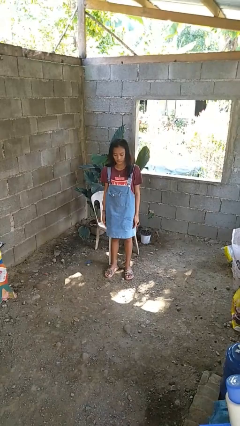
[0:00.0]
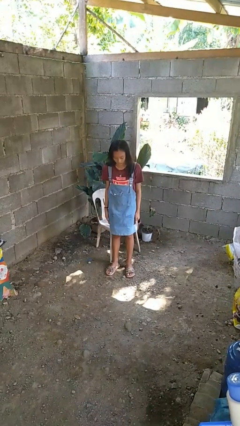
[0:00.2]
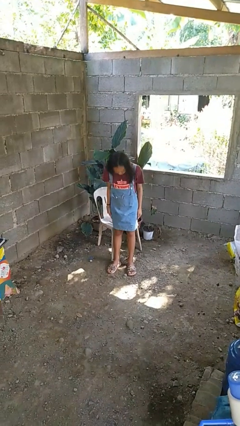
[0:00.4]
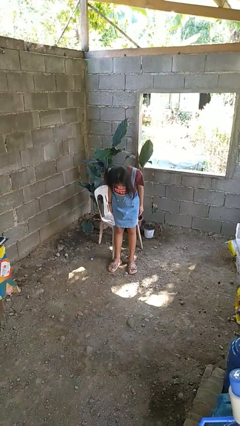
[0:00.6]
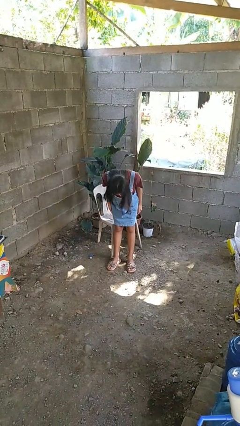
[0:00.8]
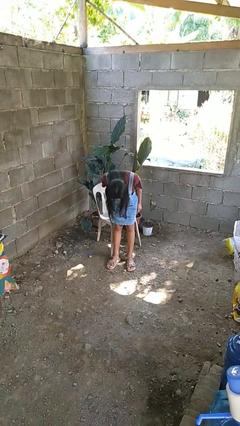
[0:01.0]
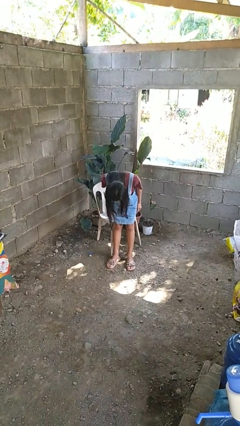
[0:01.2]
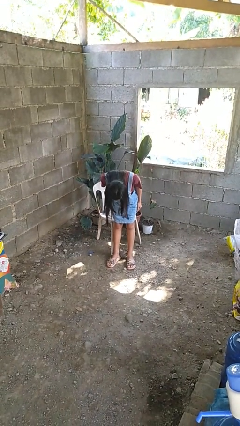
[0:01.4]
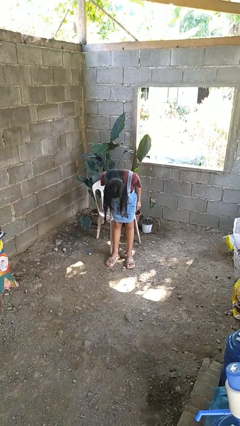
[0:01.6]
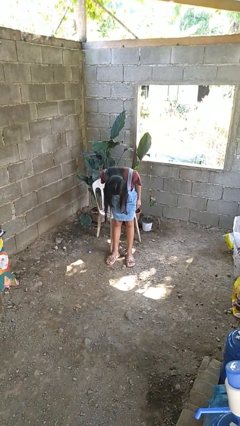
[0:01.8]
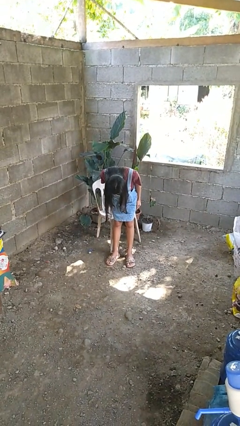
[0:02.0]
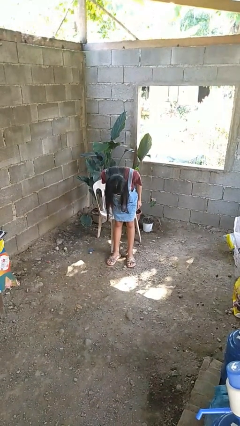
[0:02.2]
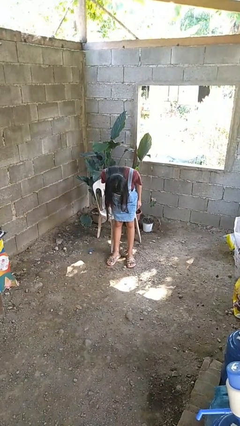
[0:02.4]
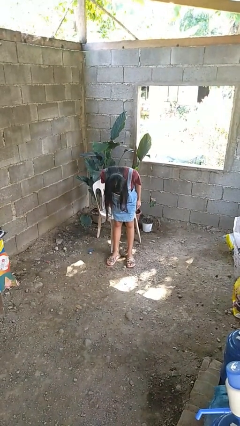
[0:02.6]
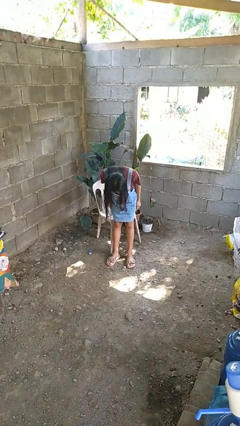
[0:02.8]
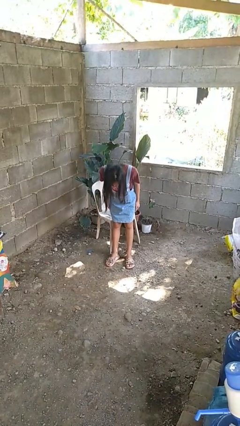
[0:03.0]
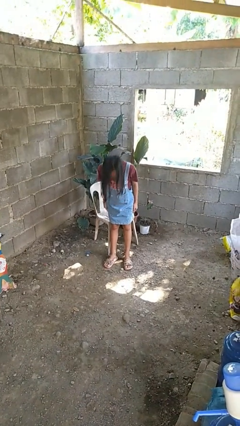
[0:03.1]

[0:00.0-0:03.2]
person bows

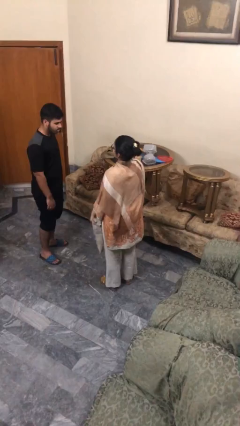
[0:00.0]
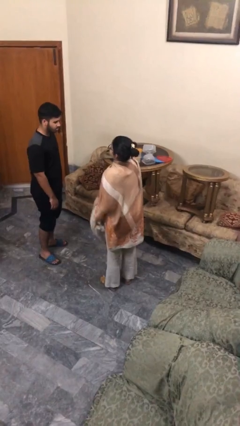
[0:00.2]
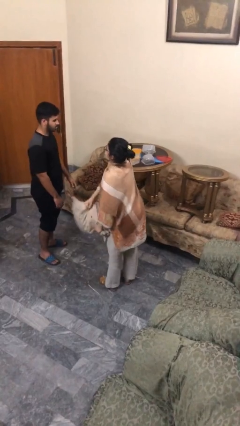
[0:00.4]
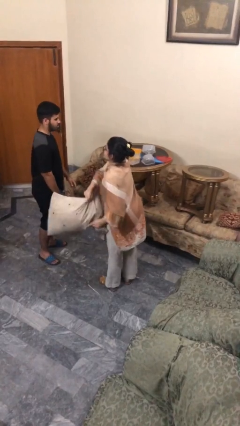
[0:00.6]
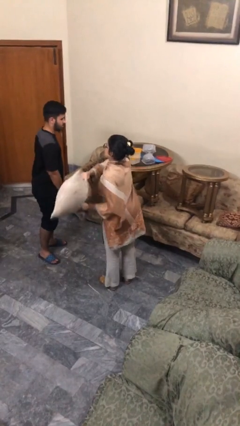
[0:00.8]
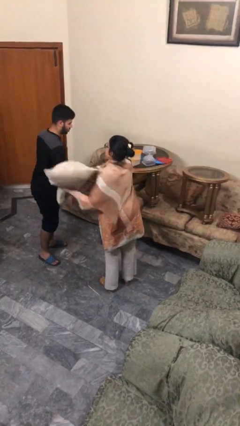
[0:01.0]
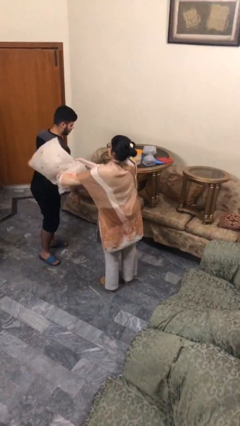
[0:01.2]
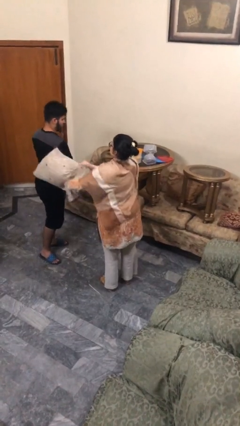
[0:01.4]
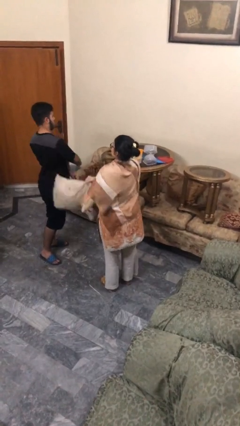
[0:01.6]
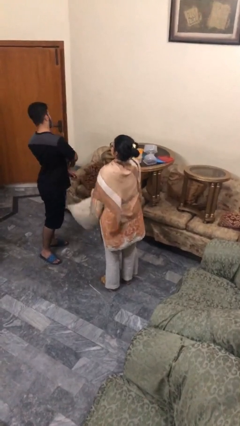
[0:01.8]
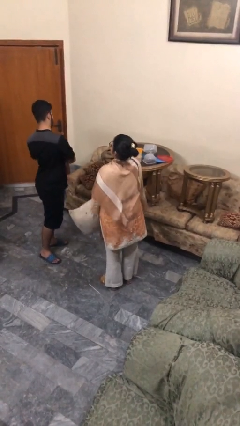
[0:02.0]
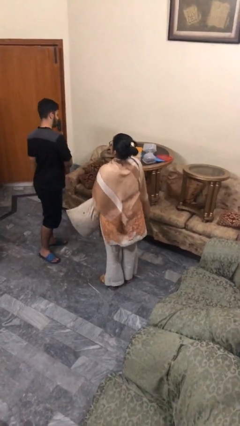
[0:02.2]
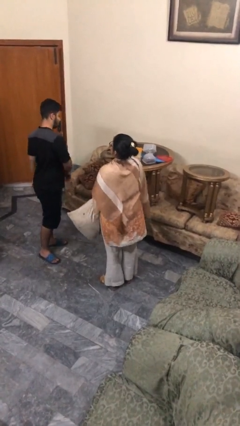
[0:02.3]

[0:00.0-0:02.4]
person hits person with pillow

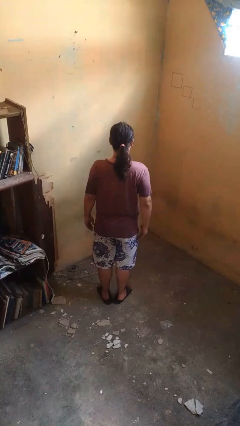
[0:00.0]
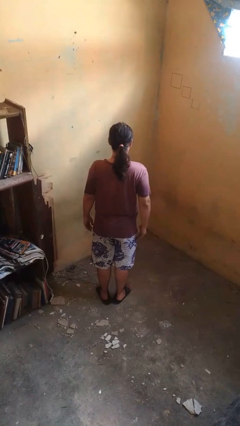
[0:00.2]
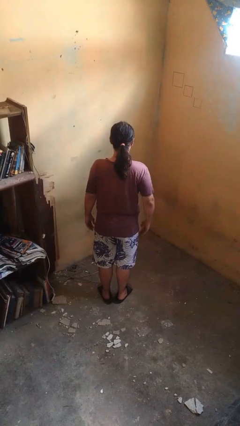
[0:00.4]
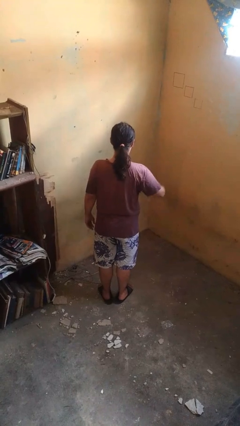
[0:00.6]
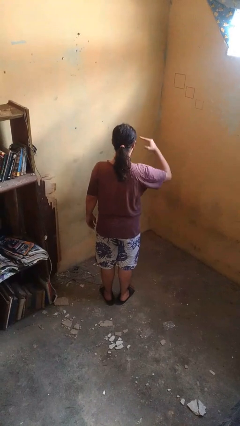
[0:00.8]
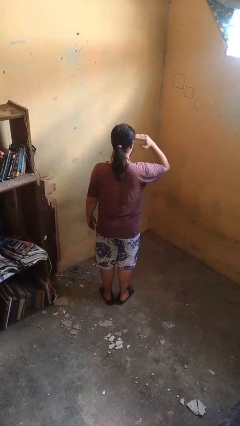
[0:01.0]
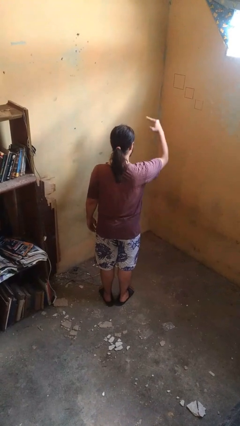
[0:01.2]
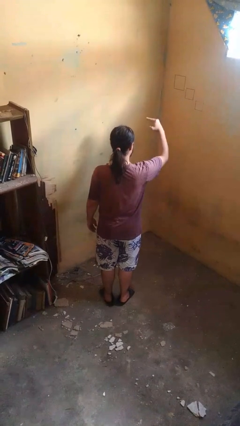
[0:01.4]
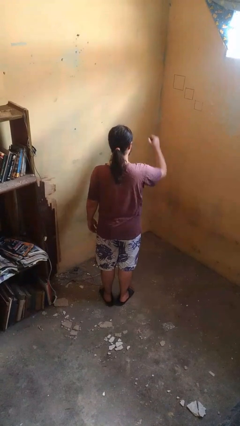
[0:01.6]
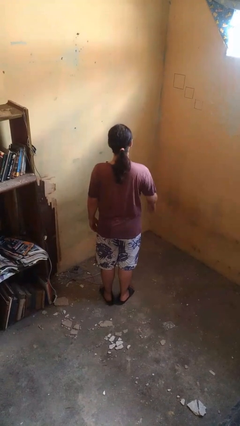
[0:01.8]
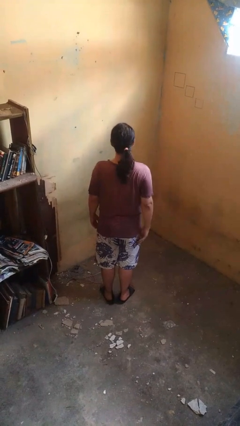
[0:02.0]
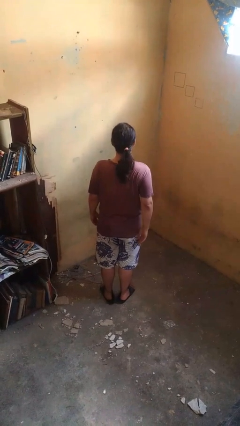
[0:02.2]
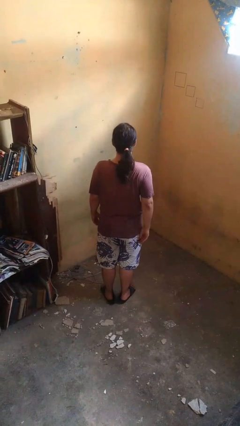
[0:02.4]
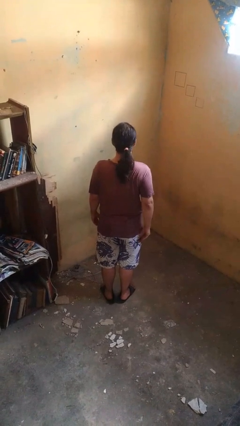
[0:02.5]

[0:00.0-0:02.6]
person salutes

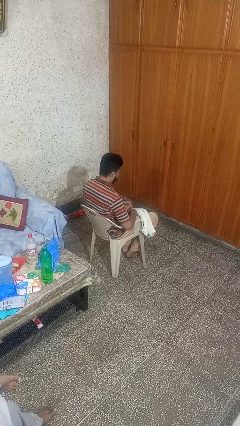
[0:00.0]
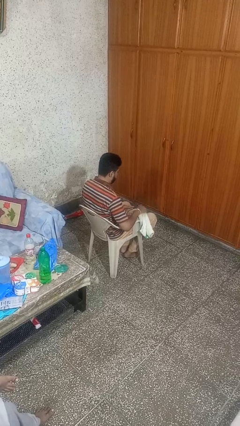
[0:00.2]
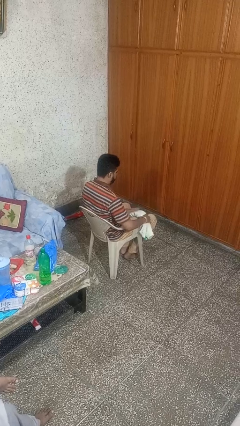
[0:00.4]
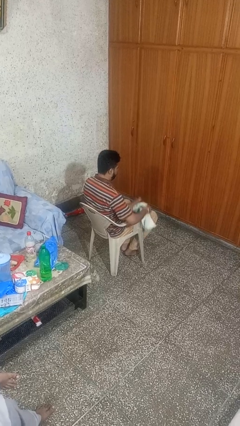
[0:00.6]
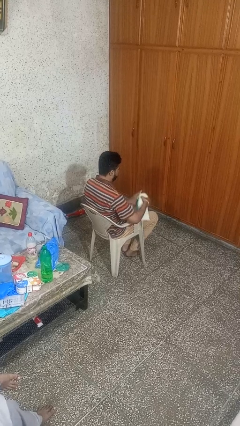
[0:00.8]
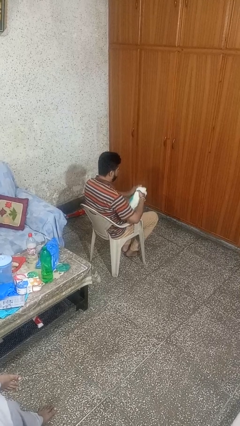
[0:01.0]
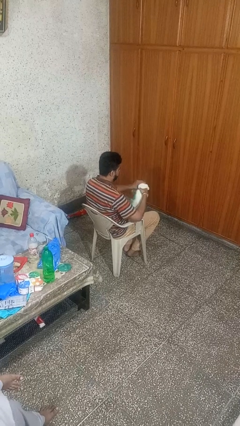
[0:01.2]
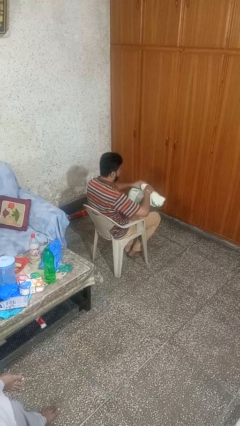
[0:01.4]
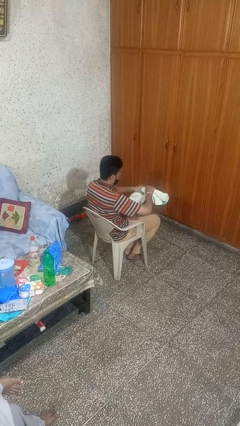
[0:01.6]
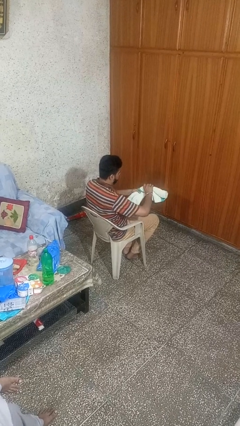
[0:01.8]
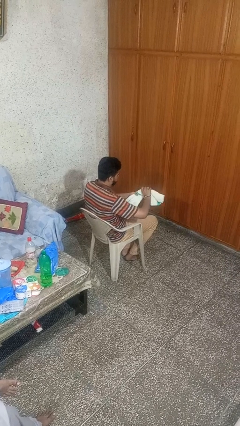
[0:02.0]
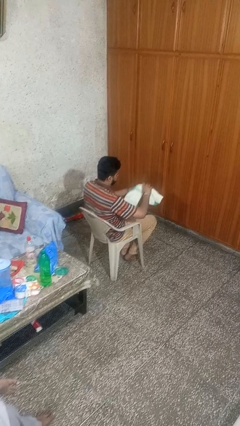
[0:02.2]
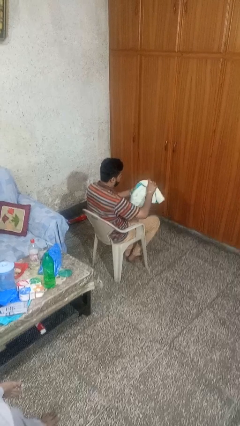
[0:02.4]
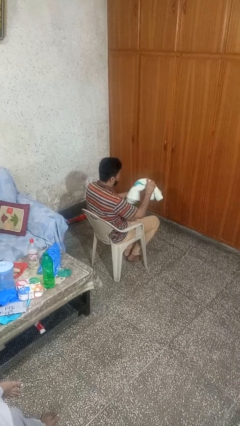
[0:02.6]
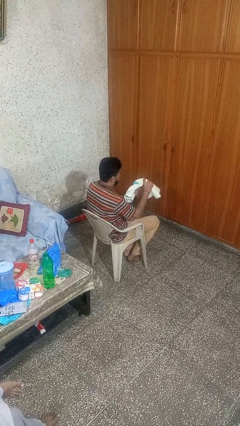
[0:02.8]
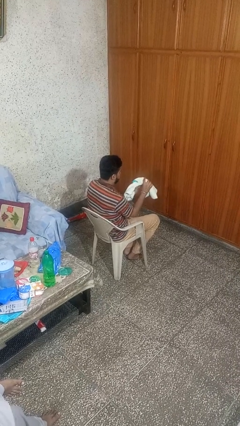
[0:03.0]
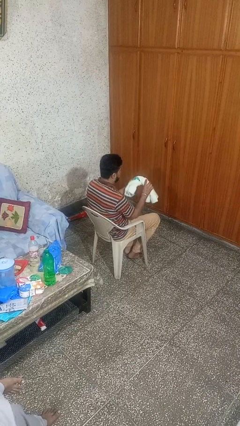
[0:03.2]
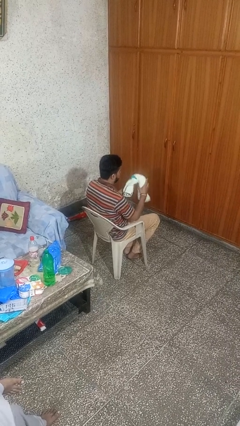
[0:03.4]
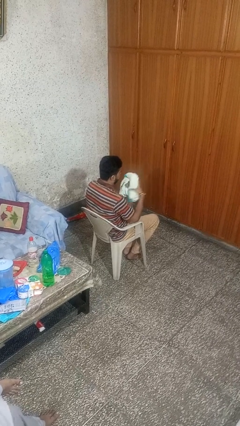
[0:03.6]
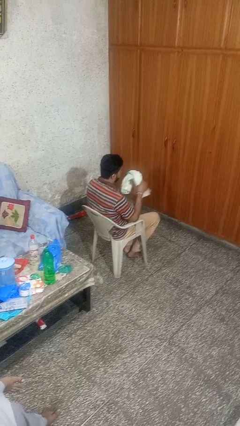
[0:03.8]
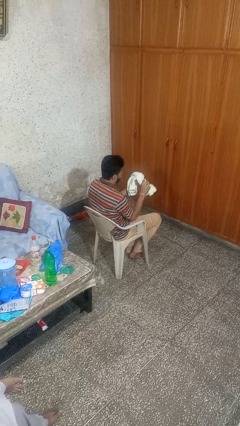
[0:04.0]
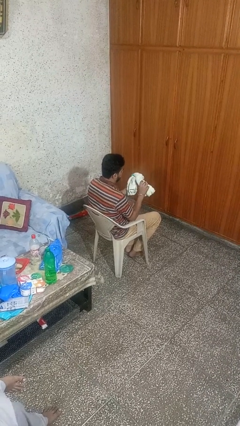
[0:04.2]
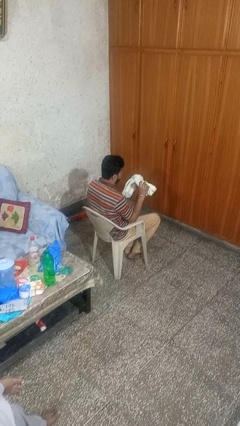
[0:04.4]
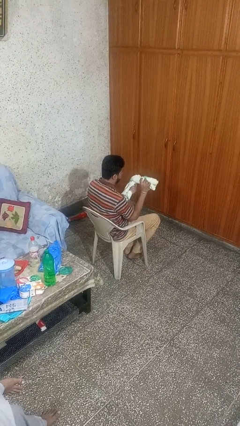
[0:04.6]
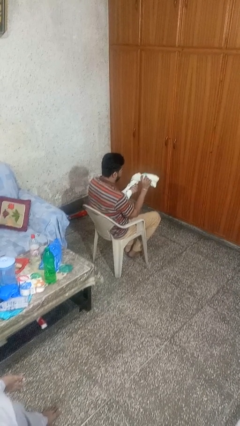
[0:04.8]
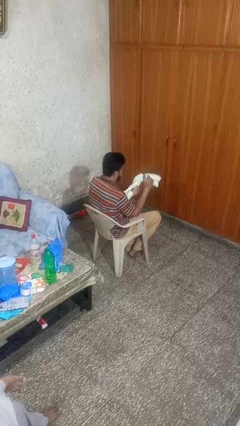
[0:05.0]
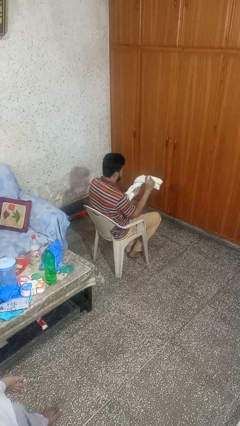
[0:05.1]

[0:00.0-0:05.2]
person squeezes object

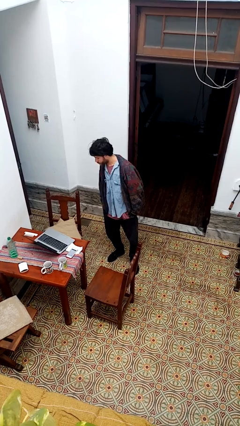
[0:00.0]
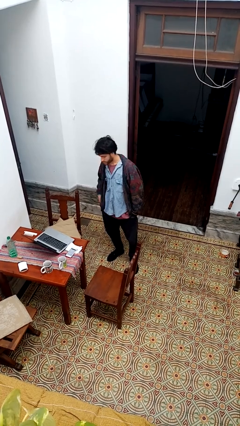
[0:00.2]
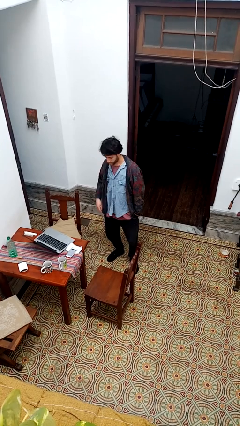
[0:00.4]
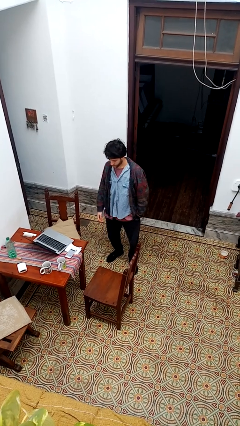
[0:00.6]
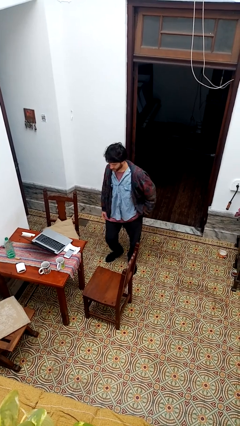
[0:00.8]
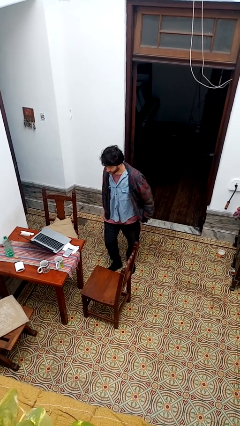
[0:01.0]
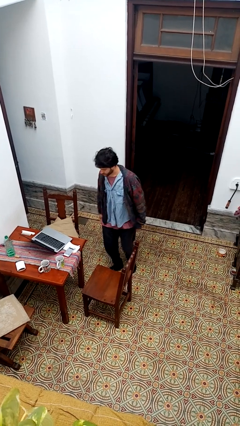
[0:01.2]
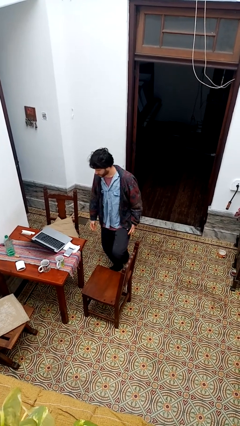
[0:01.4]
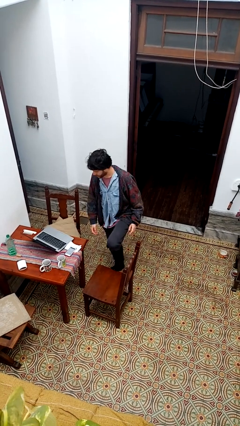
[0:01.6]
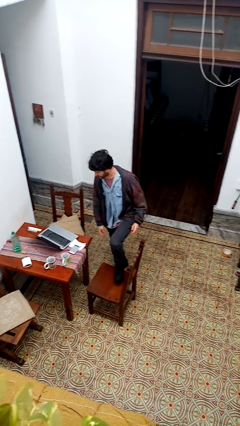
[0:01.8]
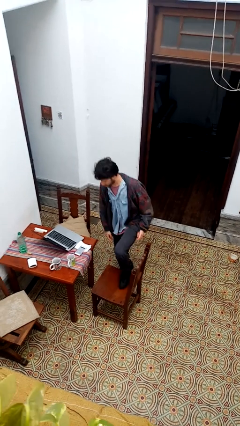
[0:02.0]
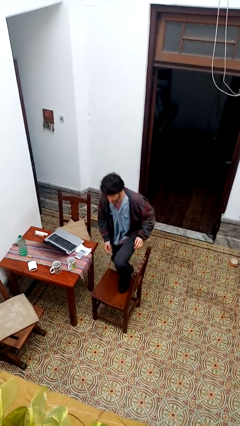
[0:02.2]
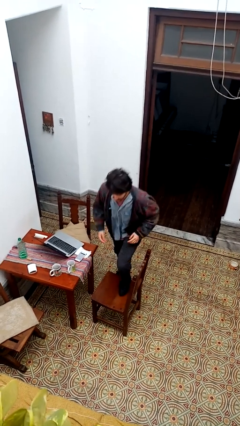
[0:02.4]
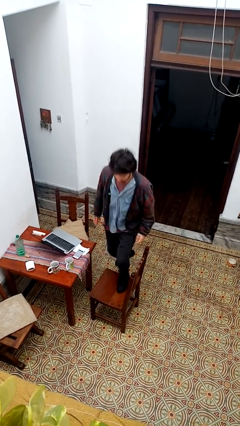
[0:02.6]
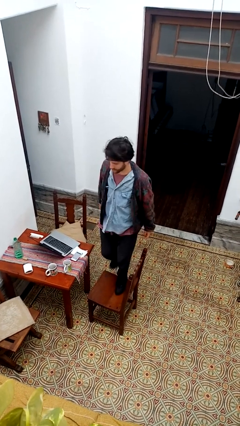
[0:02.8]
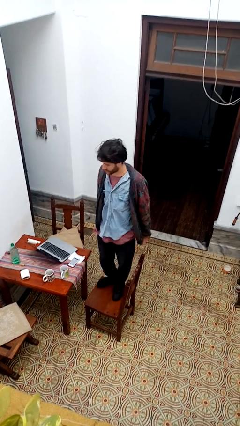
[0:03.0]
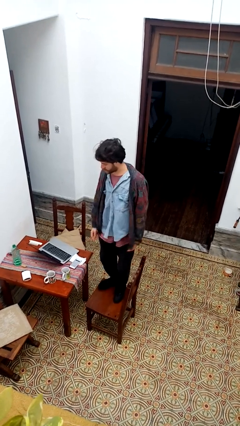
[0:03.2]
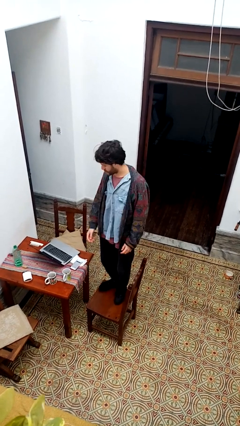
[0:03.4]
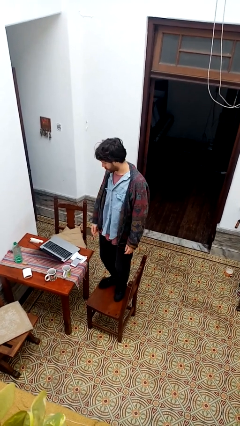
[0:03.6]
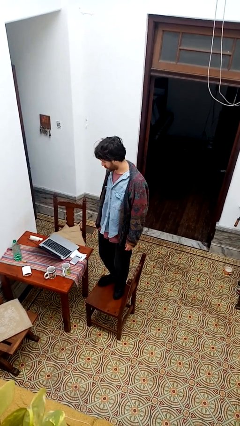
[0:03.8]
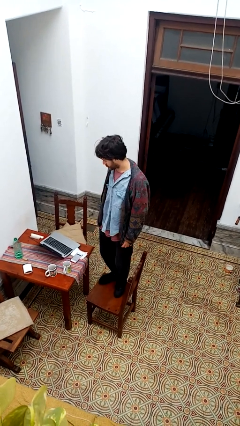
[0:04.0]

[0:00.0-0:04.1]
person climbs on chair

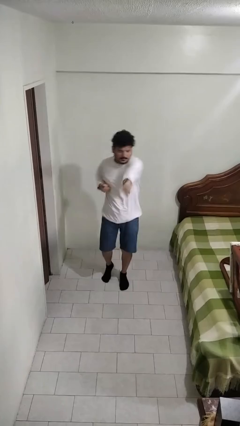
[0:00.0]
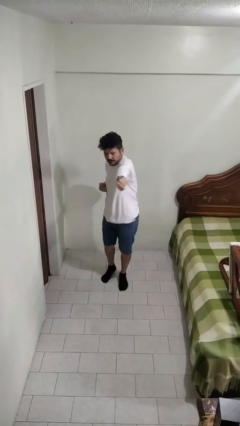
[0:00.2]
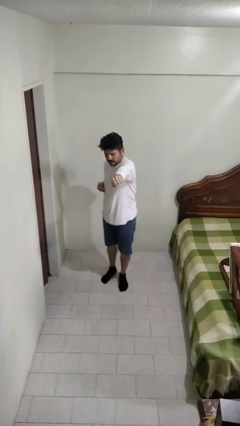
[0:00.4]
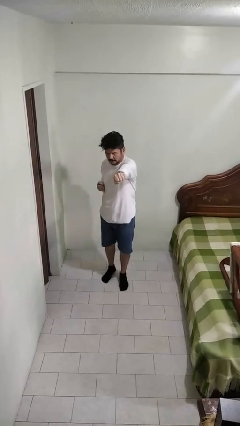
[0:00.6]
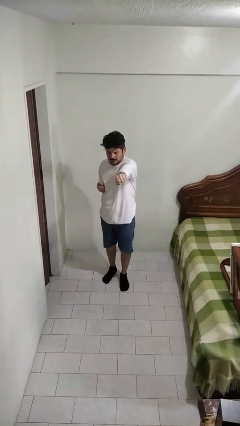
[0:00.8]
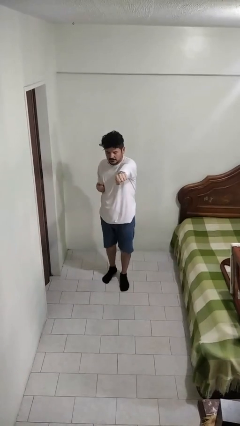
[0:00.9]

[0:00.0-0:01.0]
person karate chop
